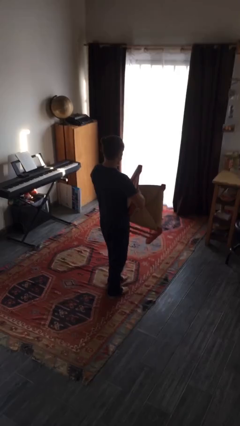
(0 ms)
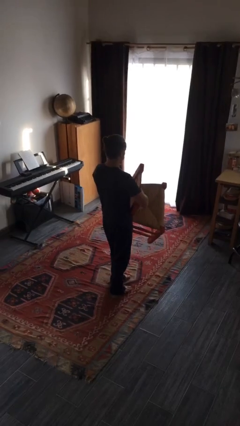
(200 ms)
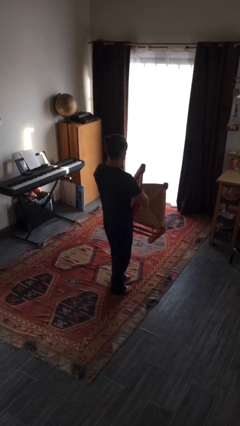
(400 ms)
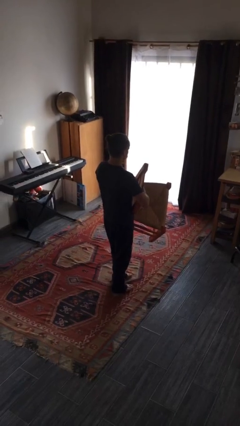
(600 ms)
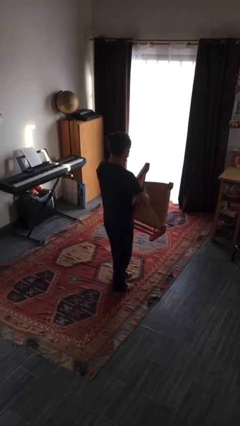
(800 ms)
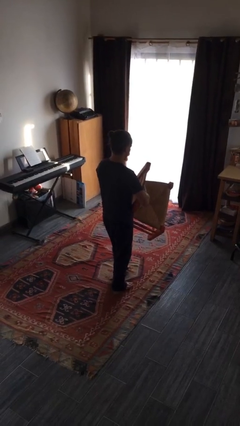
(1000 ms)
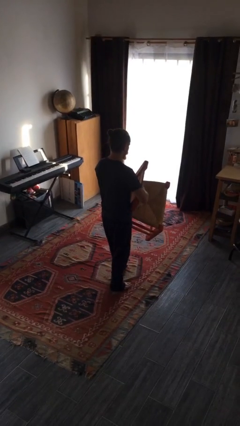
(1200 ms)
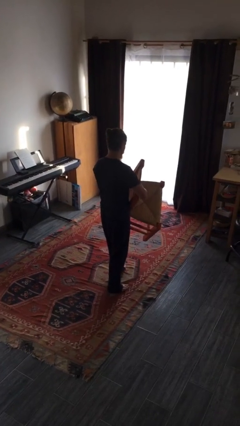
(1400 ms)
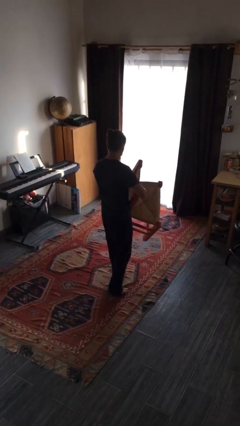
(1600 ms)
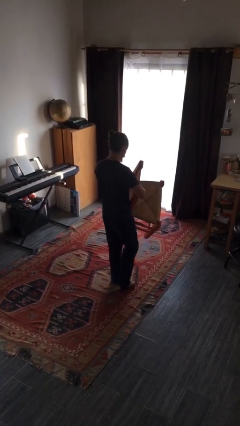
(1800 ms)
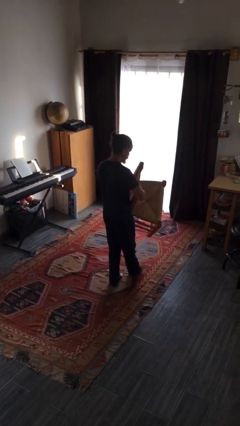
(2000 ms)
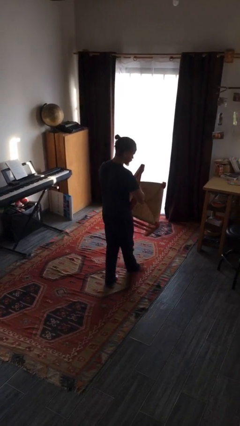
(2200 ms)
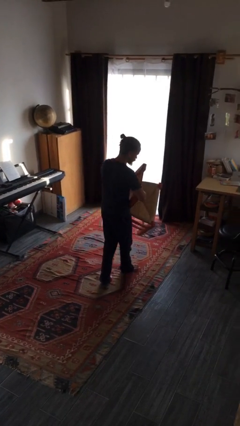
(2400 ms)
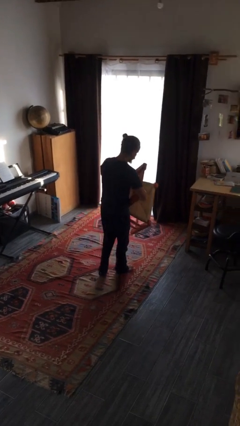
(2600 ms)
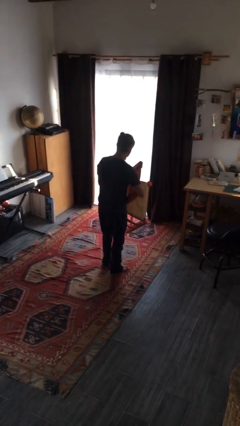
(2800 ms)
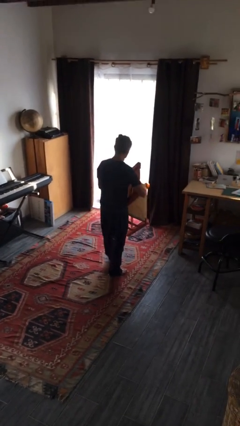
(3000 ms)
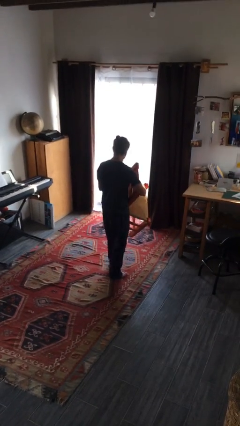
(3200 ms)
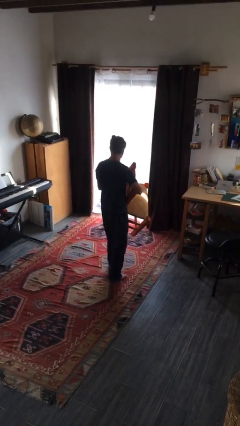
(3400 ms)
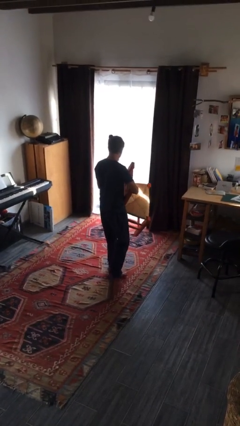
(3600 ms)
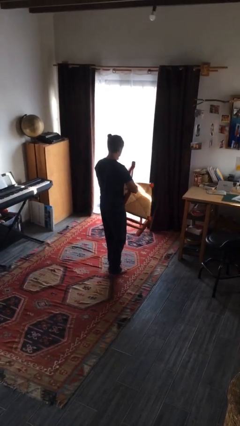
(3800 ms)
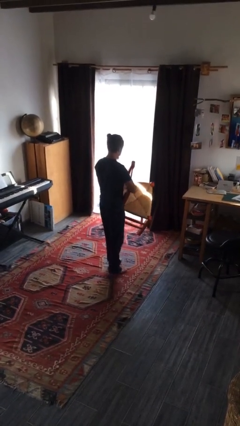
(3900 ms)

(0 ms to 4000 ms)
person carries furniture

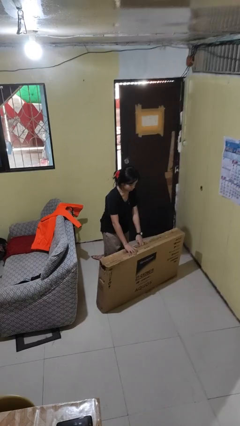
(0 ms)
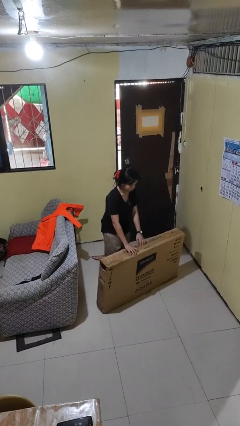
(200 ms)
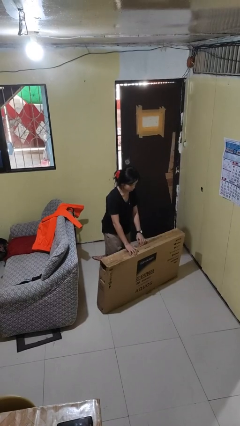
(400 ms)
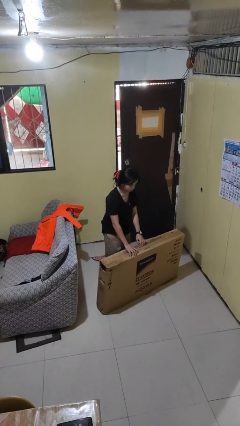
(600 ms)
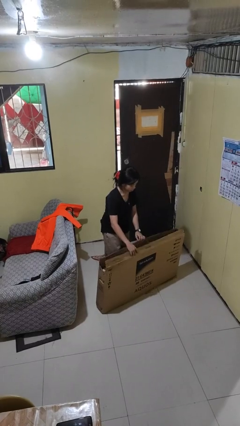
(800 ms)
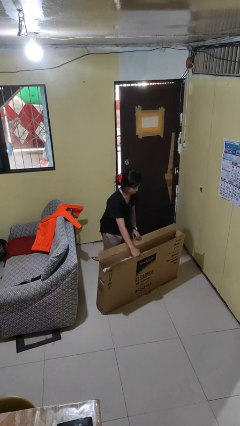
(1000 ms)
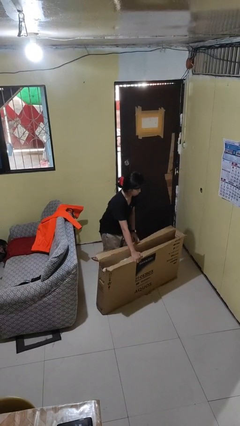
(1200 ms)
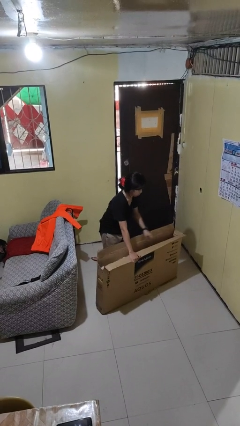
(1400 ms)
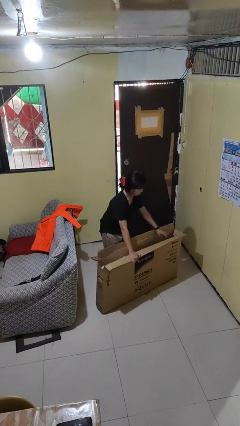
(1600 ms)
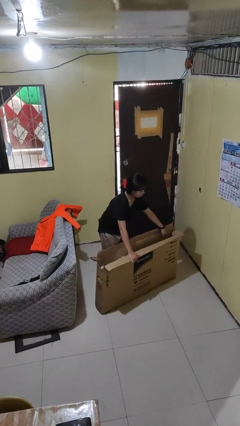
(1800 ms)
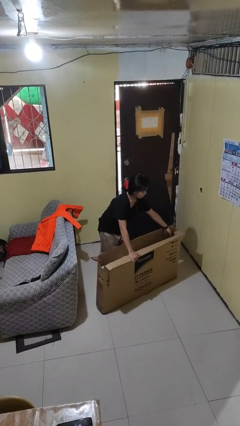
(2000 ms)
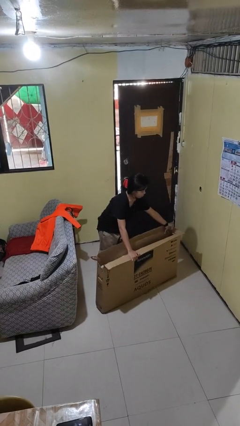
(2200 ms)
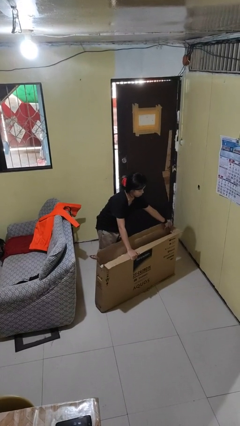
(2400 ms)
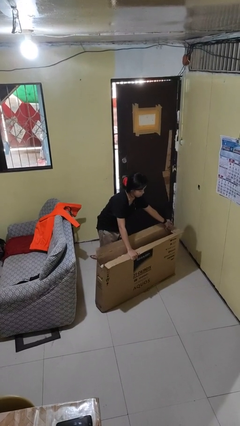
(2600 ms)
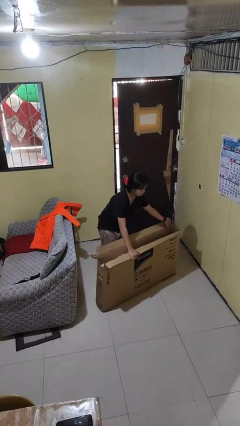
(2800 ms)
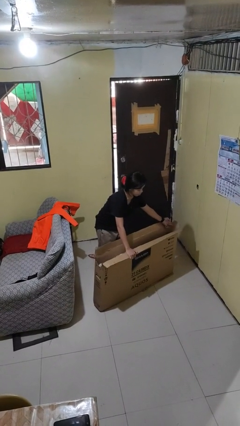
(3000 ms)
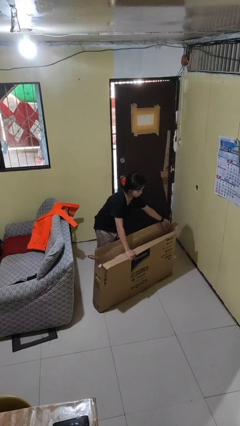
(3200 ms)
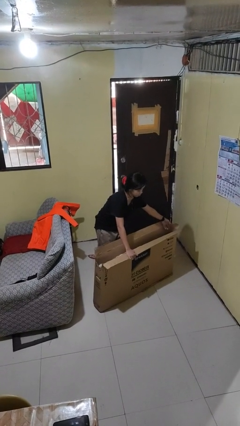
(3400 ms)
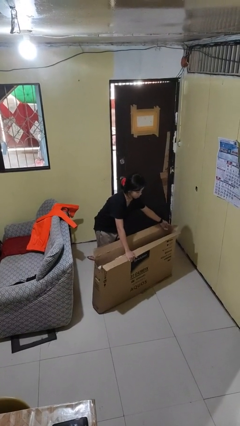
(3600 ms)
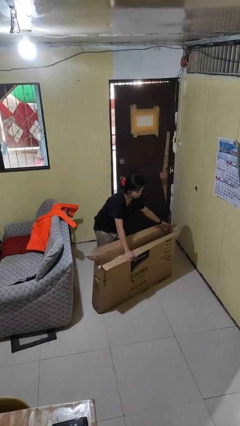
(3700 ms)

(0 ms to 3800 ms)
person opens box

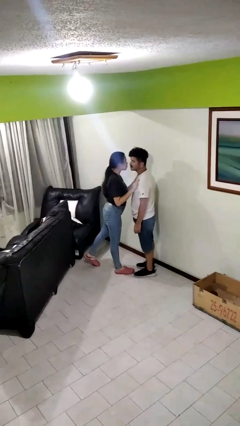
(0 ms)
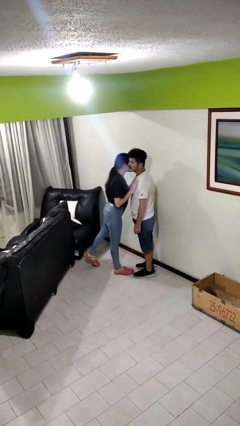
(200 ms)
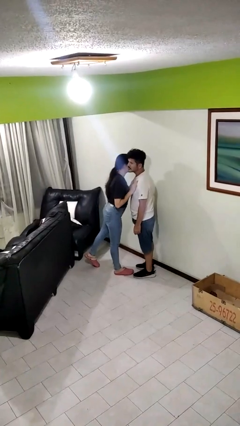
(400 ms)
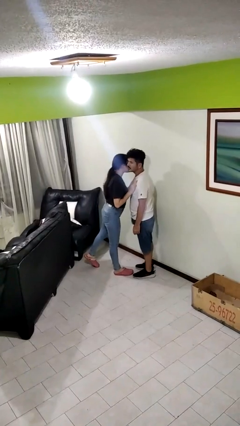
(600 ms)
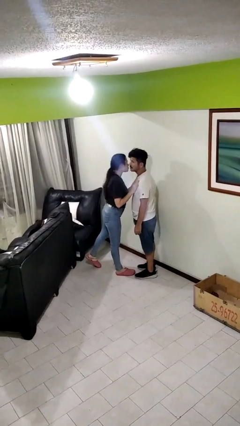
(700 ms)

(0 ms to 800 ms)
person kisses cheek of person

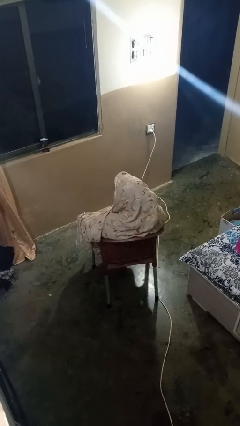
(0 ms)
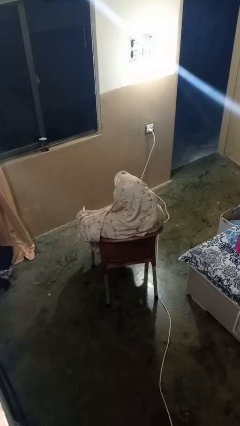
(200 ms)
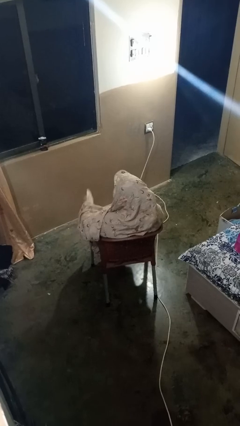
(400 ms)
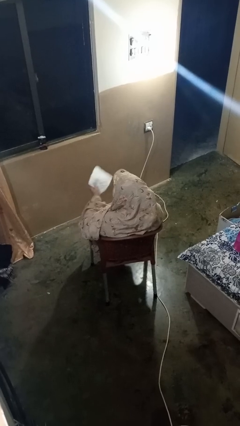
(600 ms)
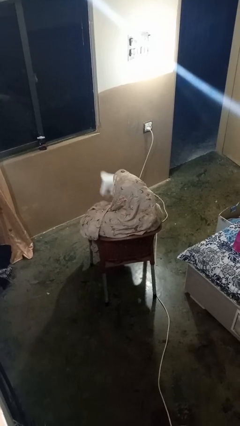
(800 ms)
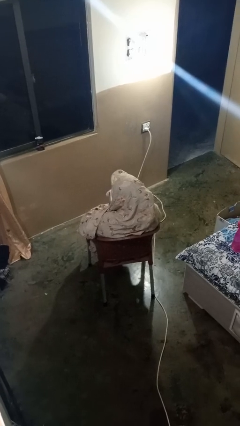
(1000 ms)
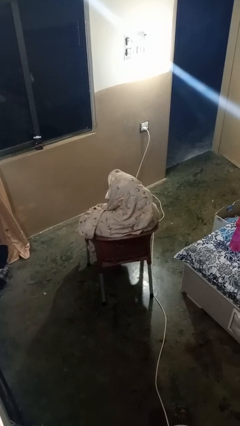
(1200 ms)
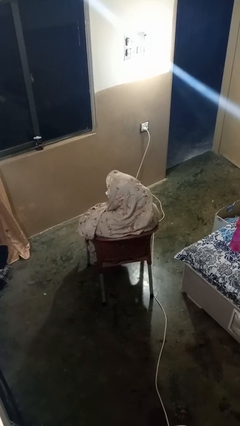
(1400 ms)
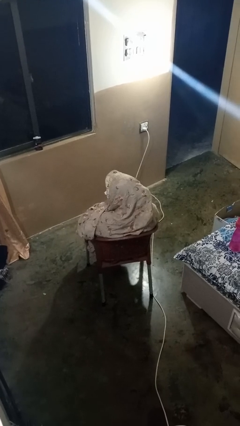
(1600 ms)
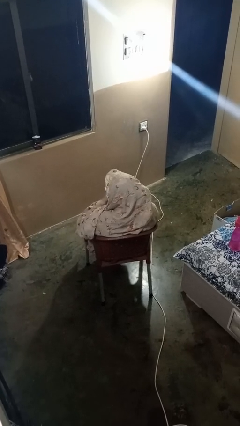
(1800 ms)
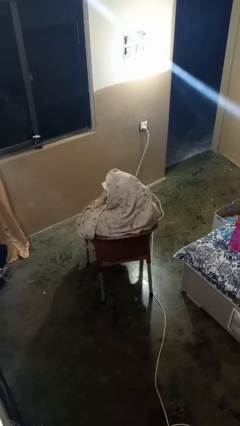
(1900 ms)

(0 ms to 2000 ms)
person wipes mouth with napkin

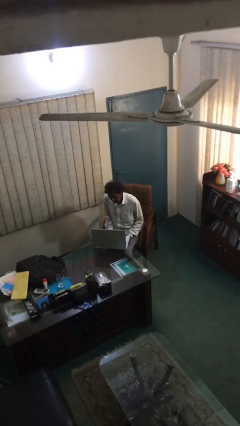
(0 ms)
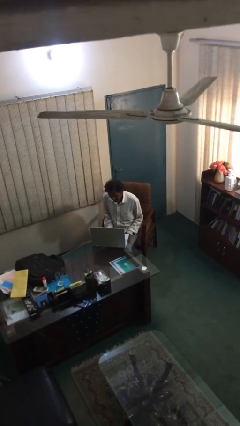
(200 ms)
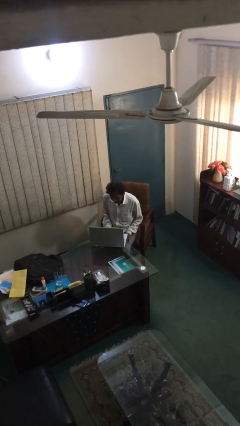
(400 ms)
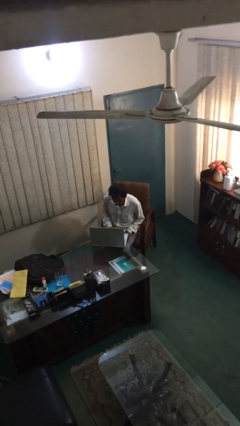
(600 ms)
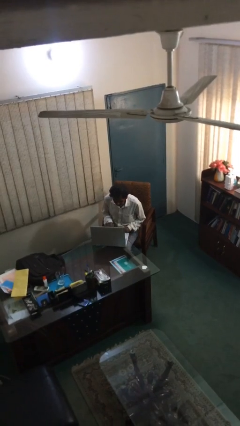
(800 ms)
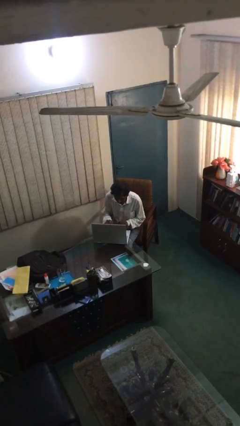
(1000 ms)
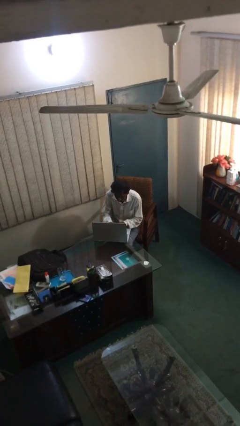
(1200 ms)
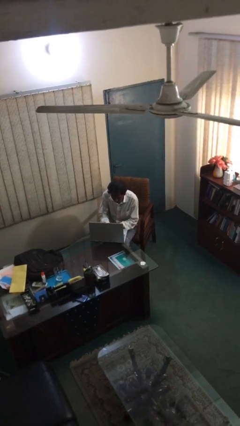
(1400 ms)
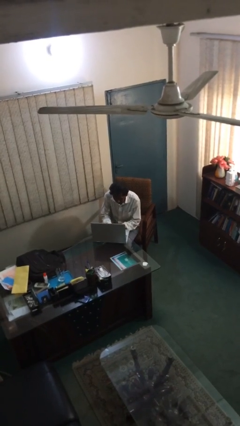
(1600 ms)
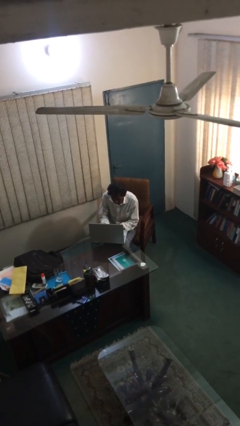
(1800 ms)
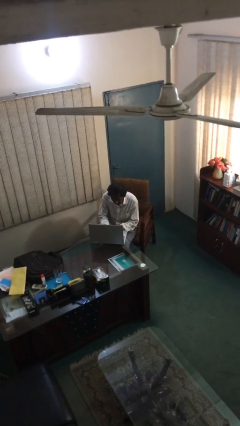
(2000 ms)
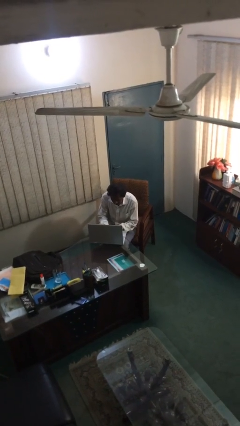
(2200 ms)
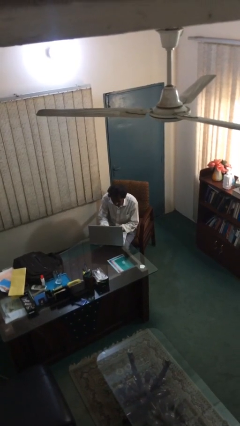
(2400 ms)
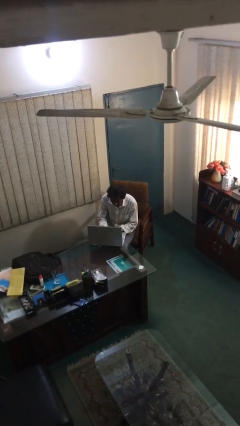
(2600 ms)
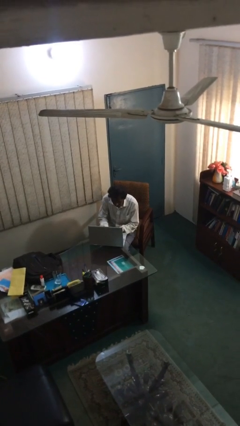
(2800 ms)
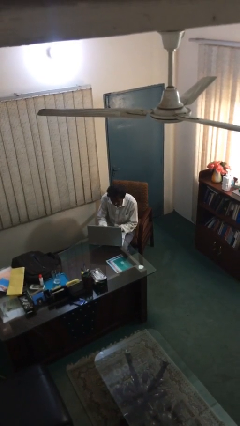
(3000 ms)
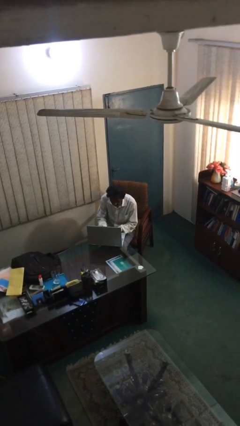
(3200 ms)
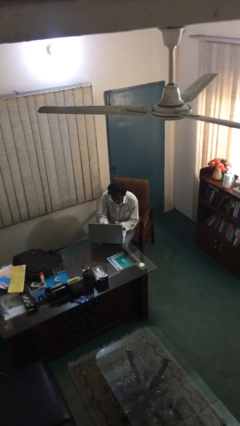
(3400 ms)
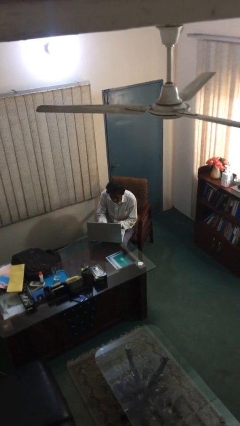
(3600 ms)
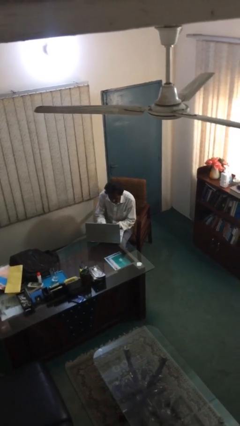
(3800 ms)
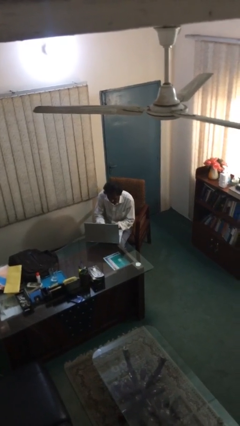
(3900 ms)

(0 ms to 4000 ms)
person interacts with laptop

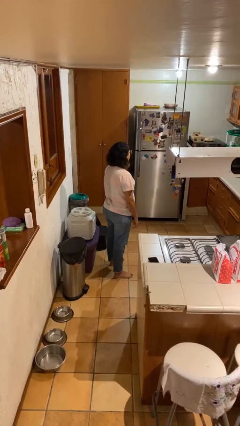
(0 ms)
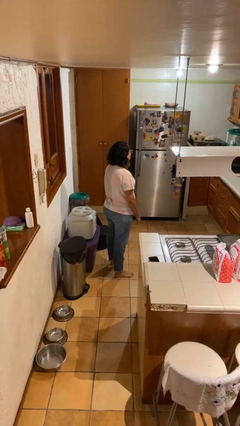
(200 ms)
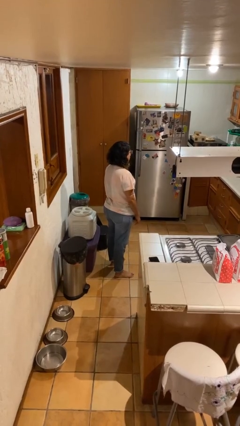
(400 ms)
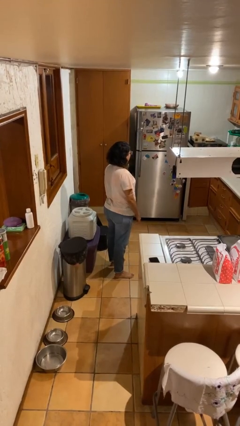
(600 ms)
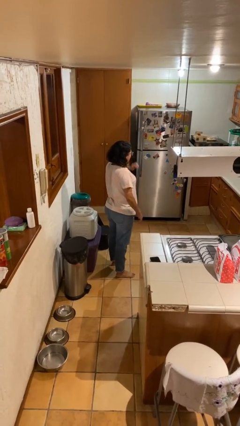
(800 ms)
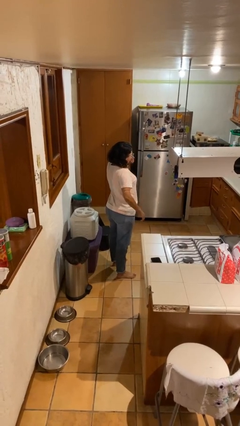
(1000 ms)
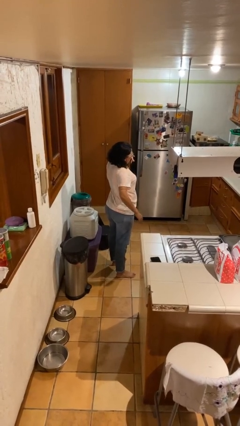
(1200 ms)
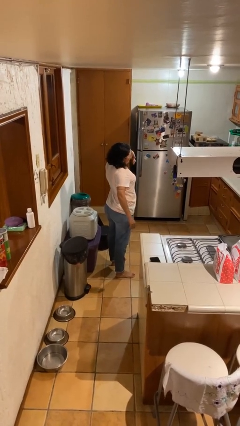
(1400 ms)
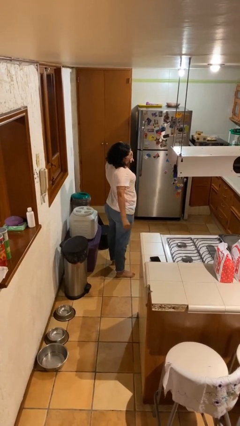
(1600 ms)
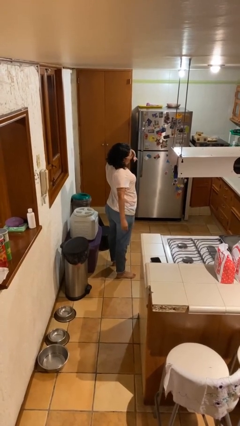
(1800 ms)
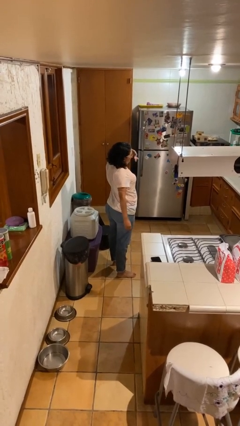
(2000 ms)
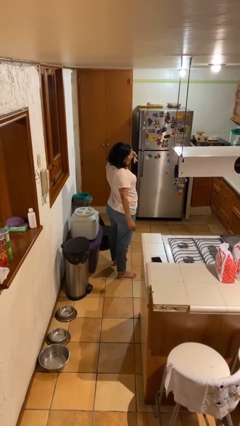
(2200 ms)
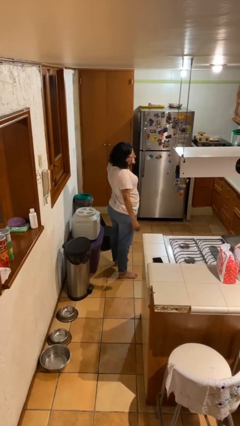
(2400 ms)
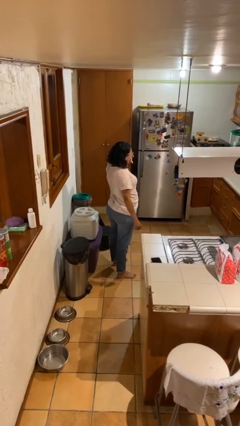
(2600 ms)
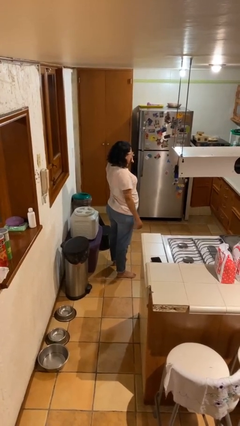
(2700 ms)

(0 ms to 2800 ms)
person yawns

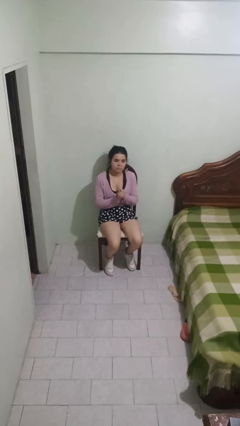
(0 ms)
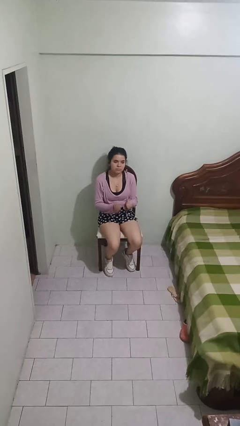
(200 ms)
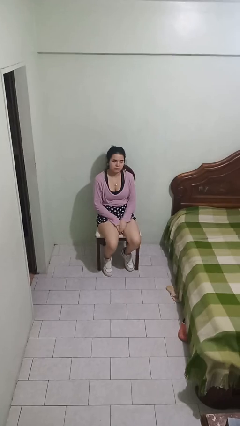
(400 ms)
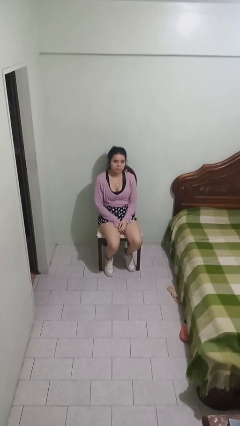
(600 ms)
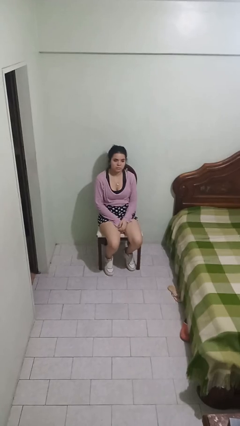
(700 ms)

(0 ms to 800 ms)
person claps hands
